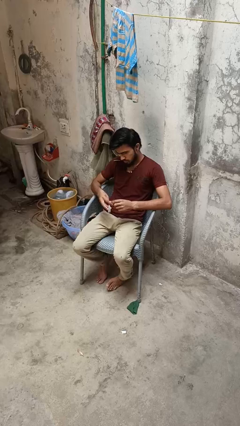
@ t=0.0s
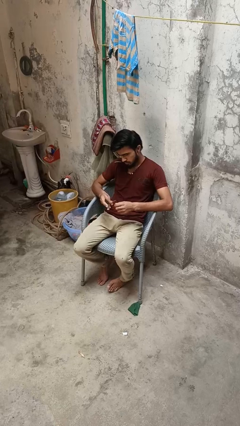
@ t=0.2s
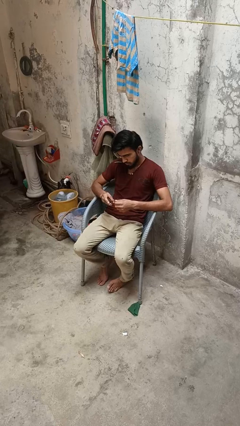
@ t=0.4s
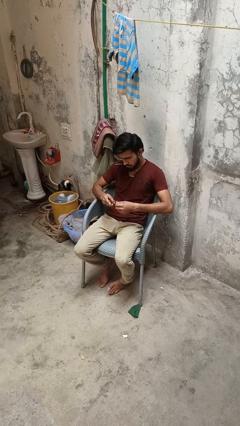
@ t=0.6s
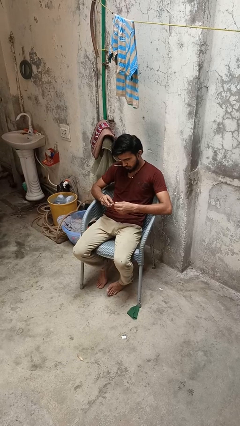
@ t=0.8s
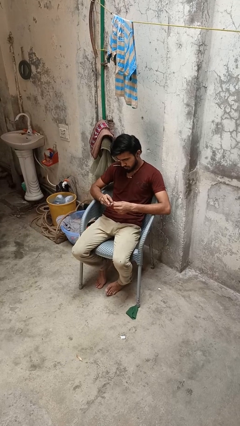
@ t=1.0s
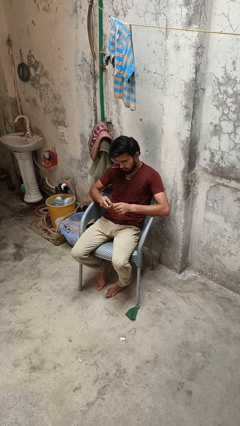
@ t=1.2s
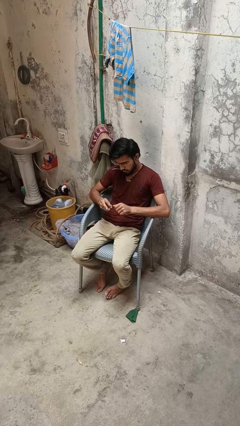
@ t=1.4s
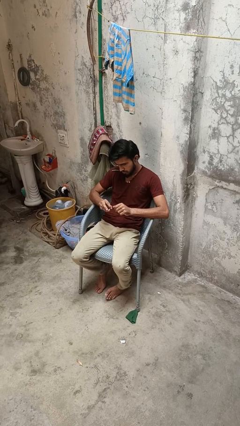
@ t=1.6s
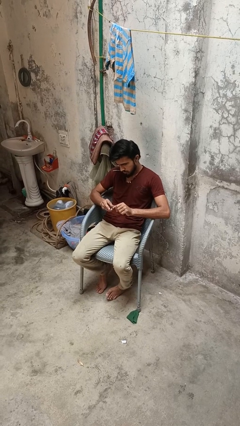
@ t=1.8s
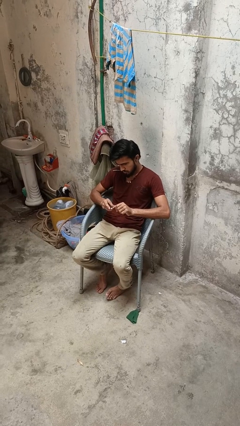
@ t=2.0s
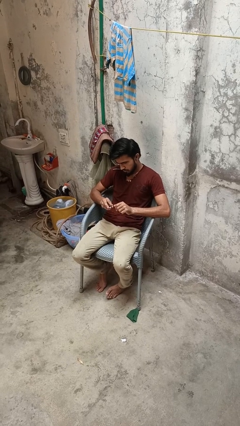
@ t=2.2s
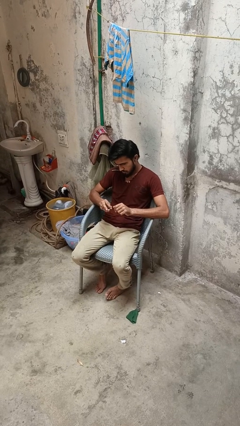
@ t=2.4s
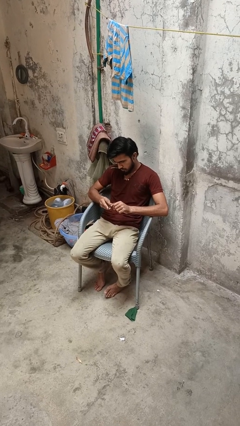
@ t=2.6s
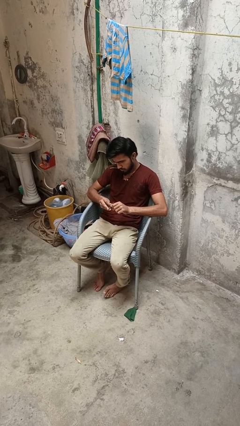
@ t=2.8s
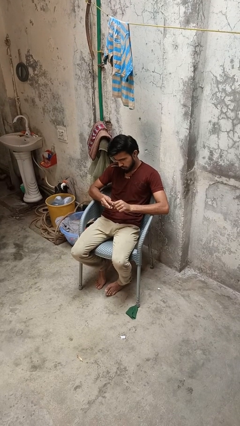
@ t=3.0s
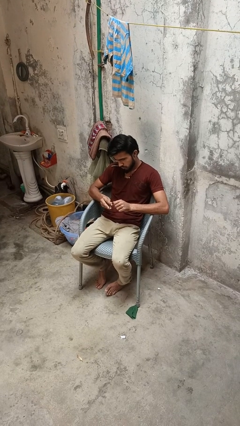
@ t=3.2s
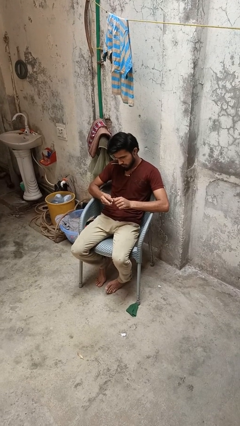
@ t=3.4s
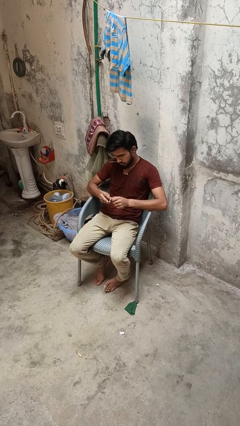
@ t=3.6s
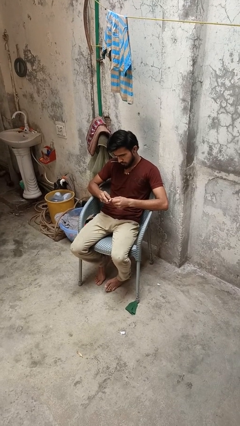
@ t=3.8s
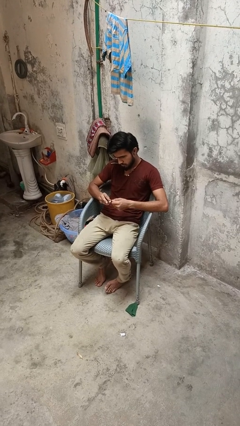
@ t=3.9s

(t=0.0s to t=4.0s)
person files fingernails

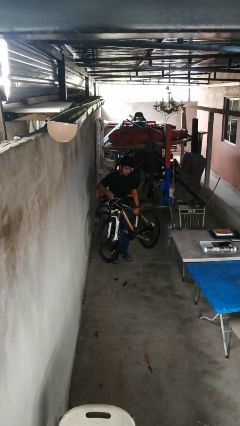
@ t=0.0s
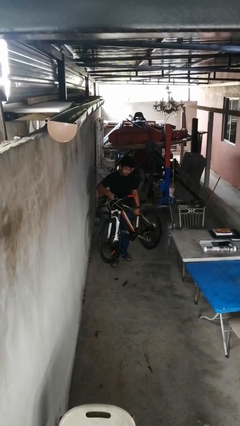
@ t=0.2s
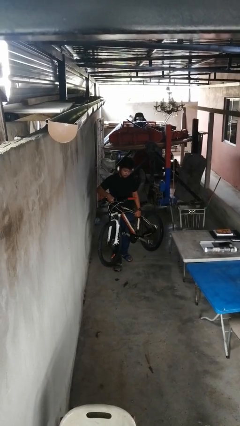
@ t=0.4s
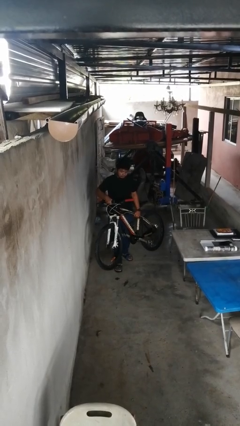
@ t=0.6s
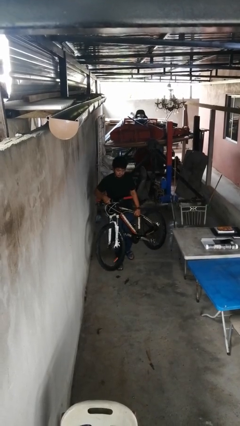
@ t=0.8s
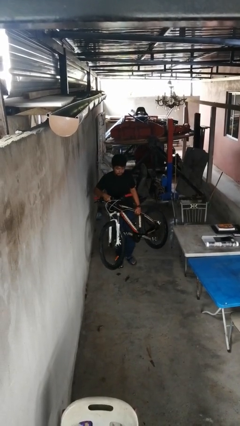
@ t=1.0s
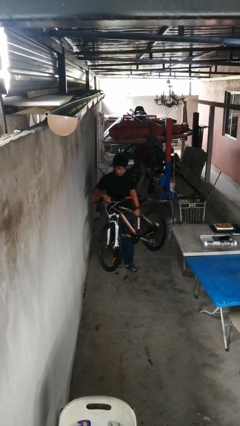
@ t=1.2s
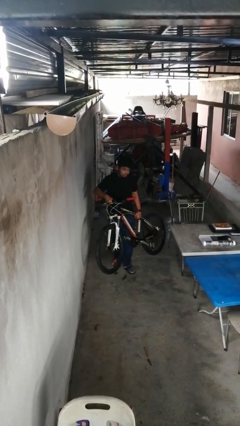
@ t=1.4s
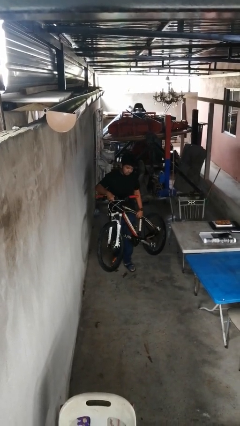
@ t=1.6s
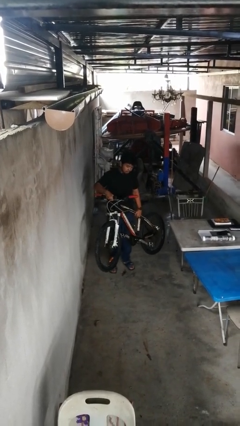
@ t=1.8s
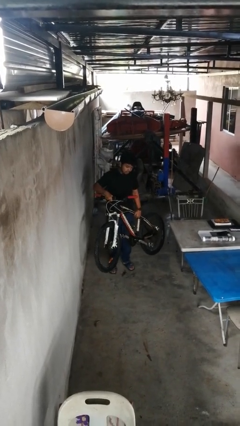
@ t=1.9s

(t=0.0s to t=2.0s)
person carries bicycle

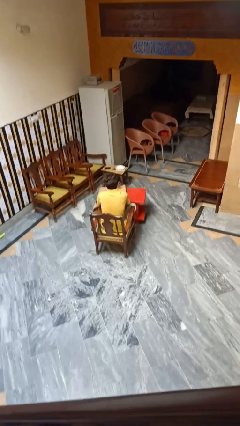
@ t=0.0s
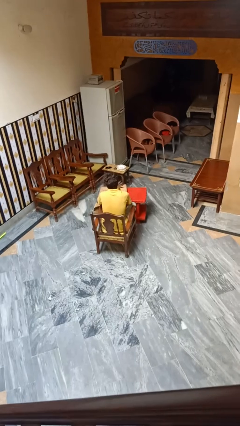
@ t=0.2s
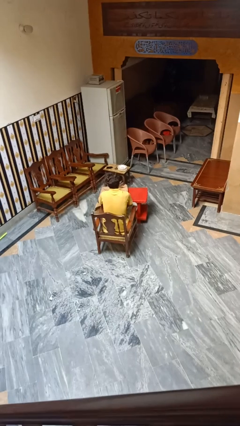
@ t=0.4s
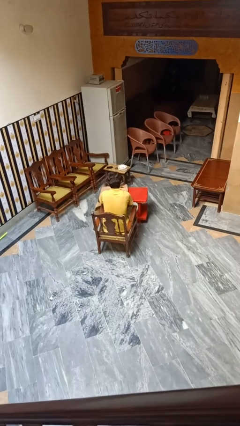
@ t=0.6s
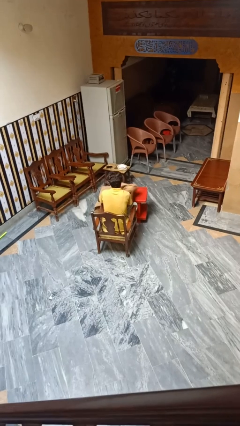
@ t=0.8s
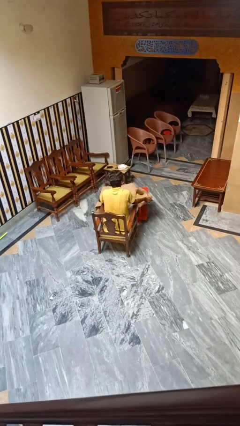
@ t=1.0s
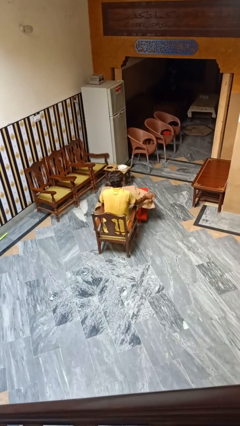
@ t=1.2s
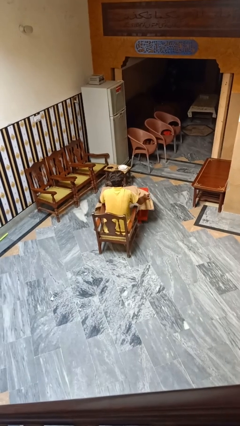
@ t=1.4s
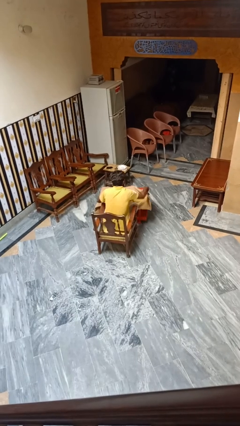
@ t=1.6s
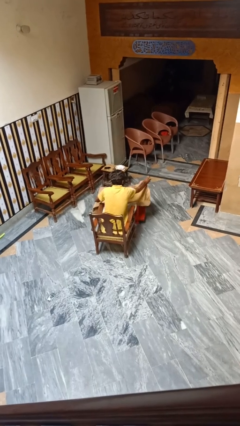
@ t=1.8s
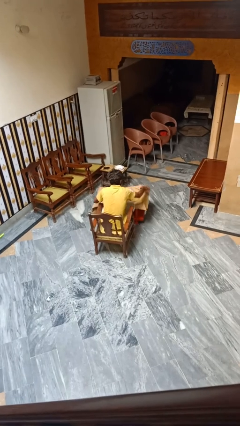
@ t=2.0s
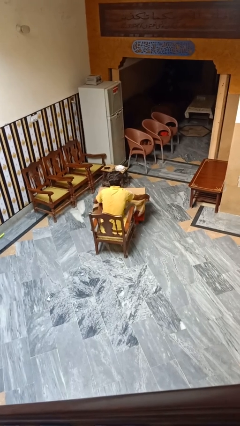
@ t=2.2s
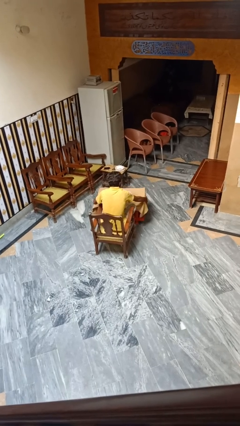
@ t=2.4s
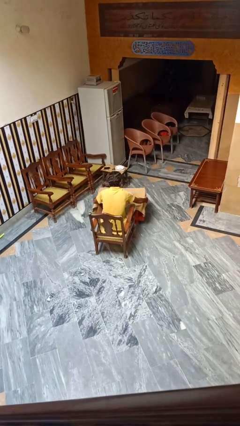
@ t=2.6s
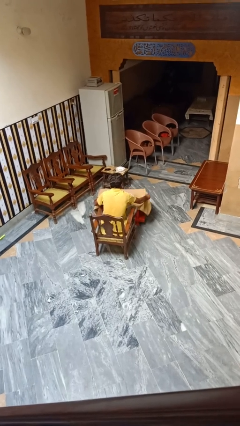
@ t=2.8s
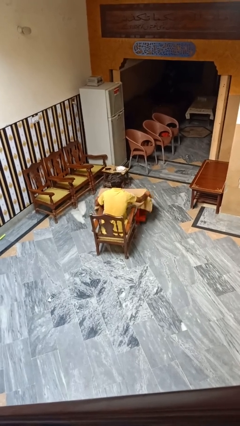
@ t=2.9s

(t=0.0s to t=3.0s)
person spreads tablecloth

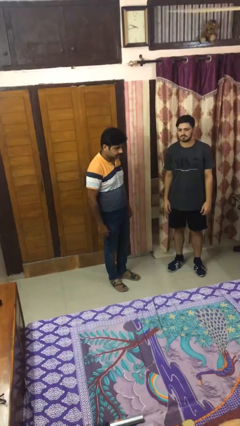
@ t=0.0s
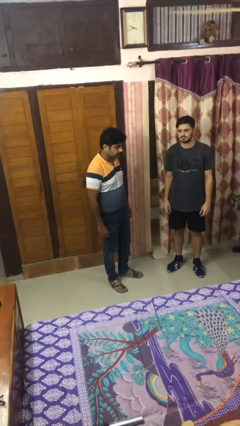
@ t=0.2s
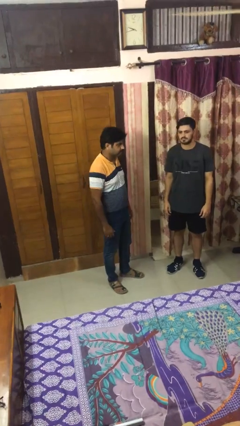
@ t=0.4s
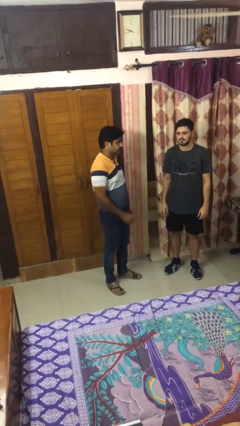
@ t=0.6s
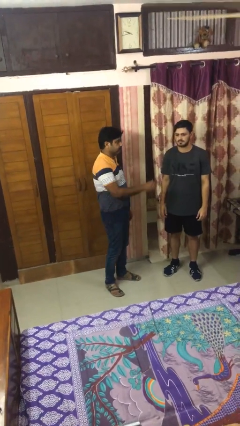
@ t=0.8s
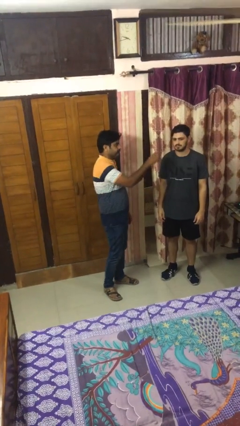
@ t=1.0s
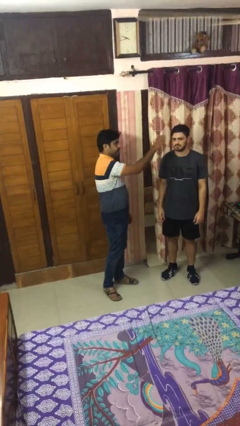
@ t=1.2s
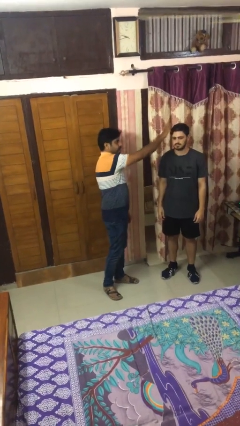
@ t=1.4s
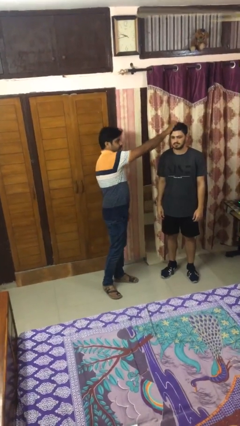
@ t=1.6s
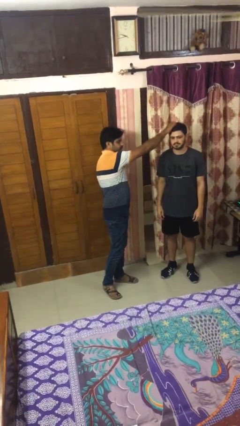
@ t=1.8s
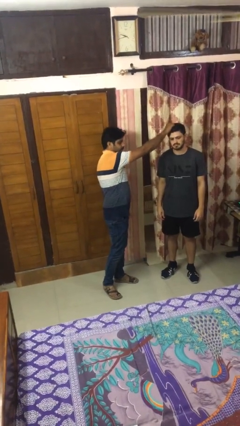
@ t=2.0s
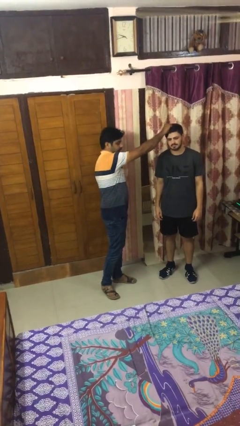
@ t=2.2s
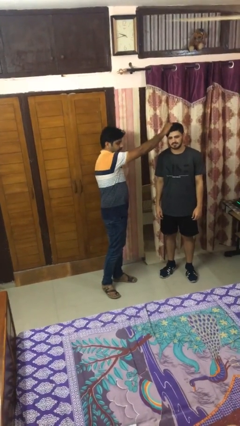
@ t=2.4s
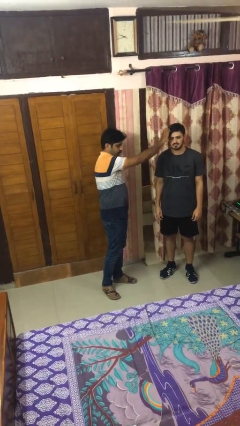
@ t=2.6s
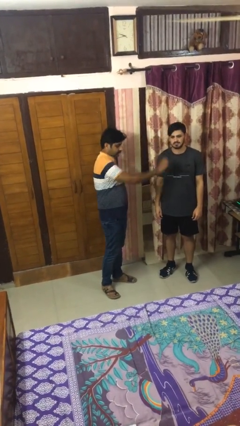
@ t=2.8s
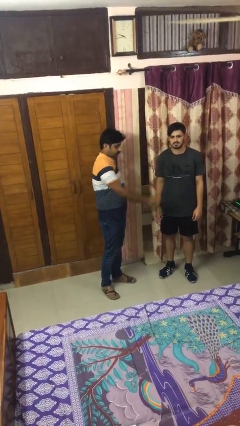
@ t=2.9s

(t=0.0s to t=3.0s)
person grabs person by hair

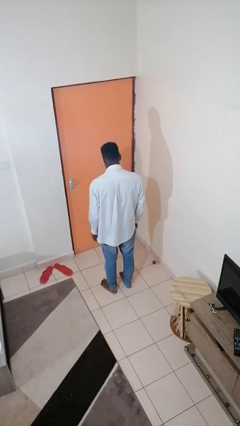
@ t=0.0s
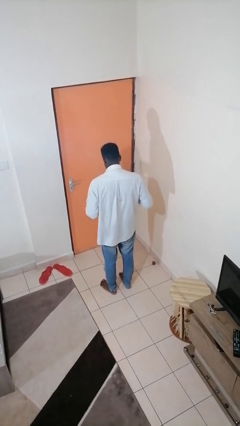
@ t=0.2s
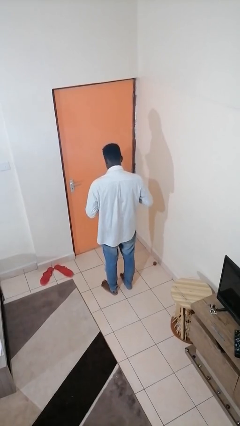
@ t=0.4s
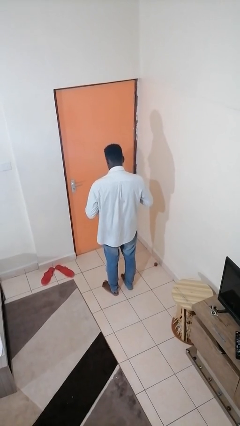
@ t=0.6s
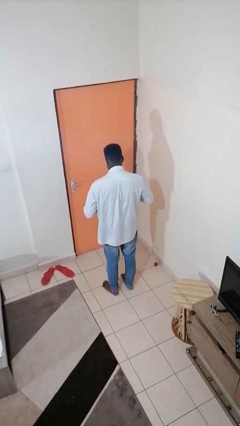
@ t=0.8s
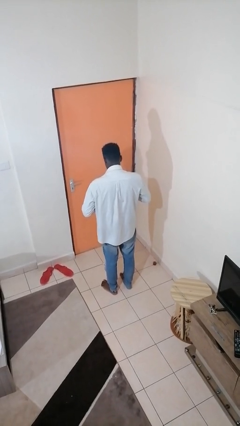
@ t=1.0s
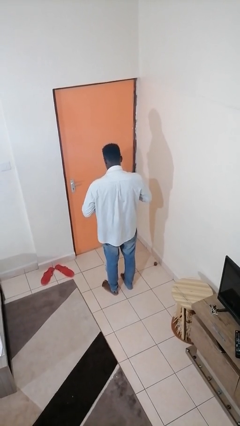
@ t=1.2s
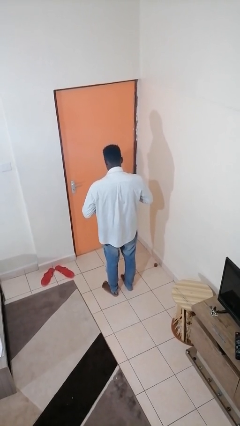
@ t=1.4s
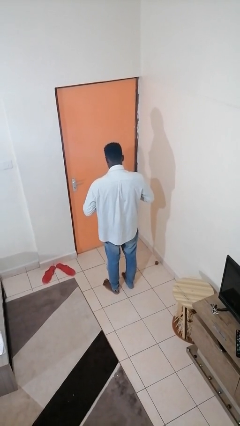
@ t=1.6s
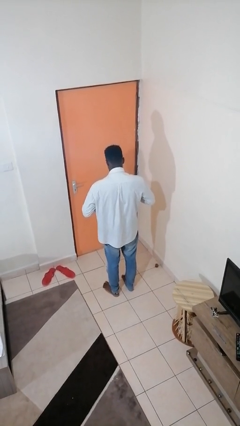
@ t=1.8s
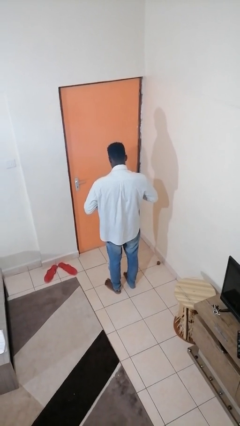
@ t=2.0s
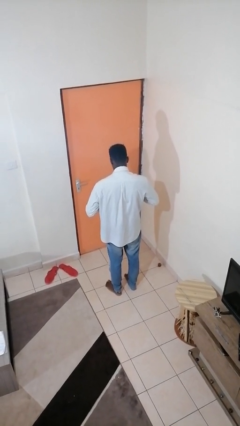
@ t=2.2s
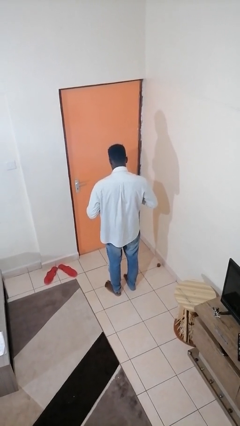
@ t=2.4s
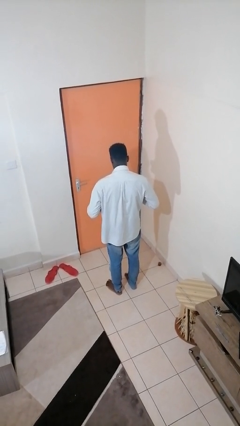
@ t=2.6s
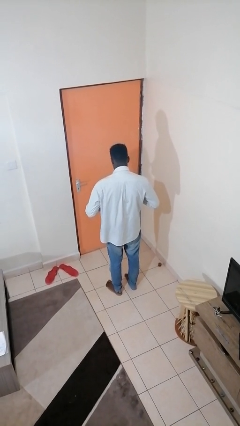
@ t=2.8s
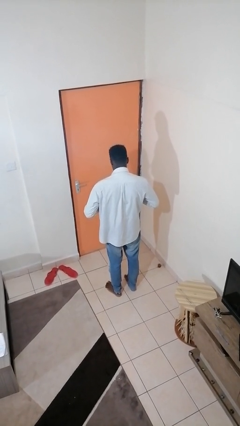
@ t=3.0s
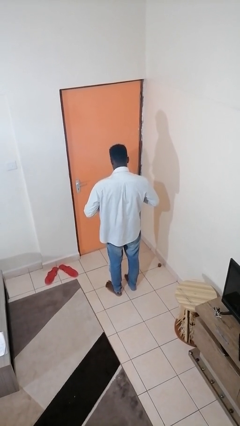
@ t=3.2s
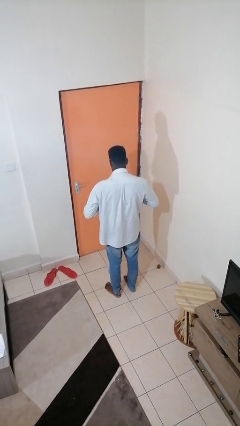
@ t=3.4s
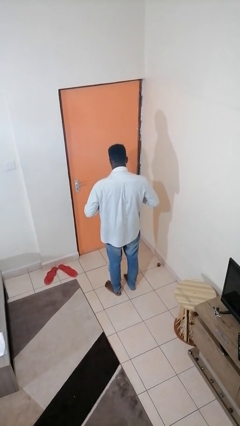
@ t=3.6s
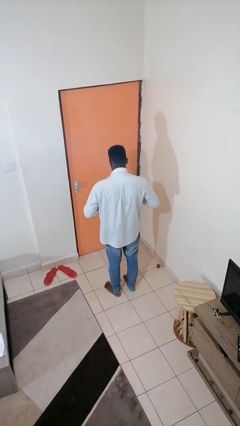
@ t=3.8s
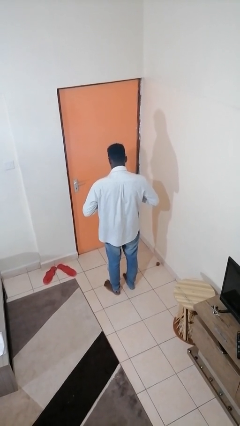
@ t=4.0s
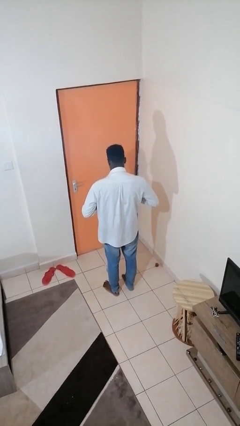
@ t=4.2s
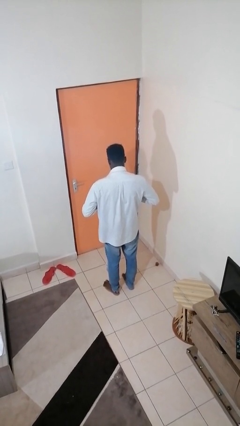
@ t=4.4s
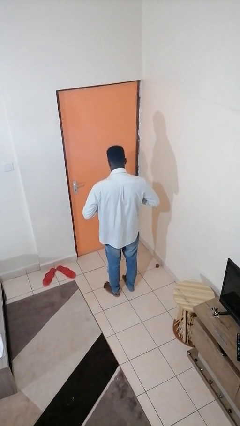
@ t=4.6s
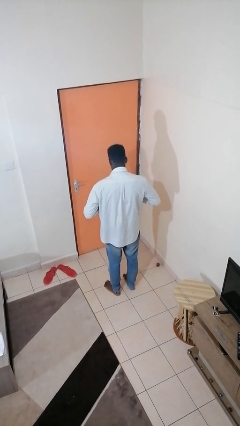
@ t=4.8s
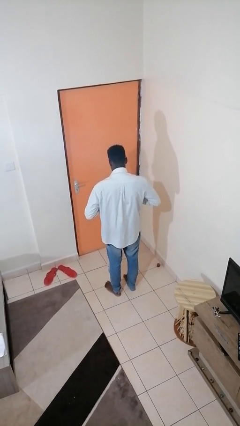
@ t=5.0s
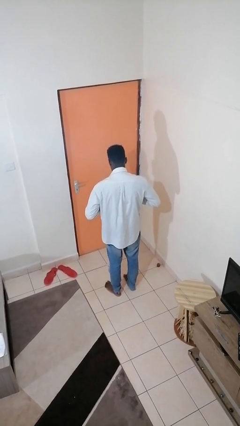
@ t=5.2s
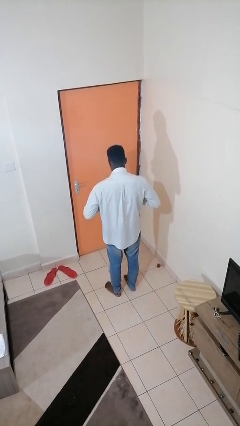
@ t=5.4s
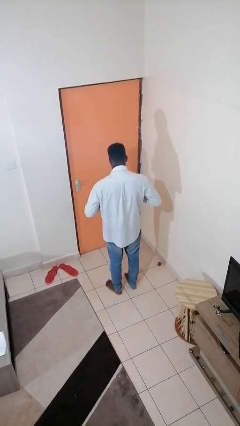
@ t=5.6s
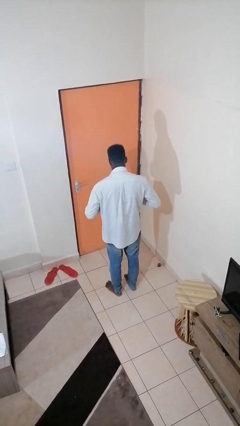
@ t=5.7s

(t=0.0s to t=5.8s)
person buttons shirt
